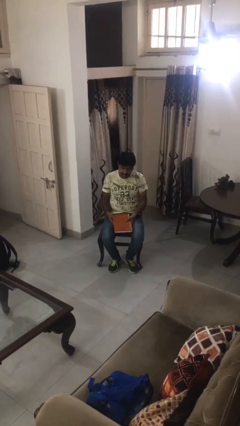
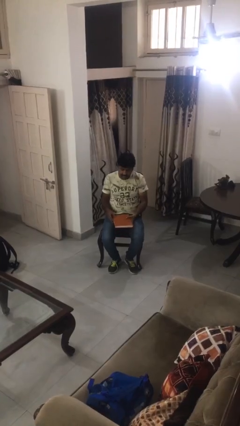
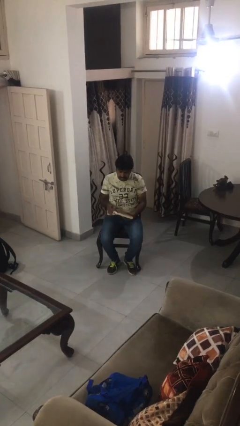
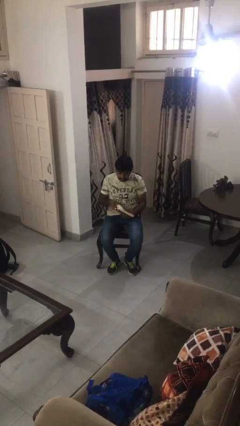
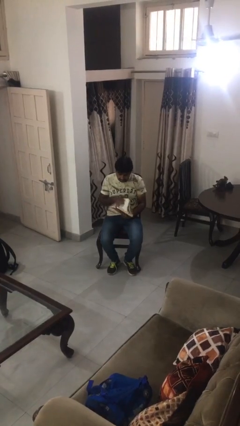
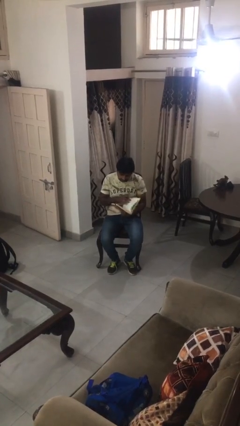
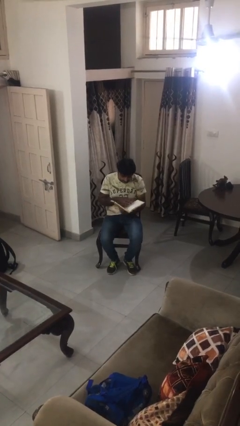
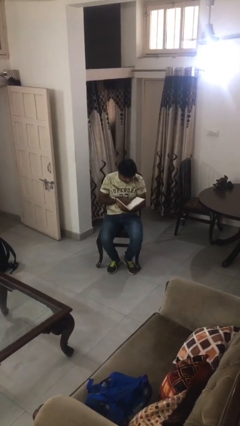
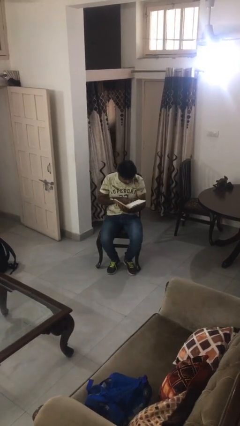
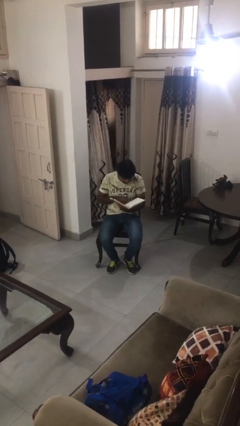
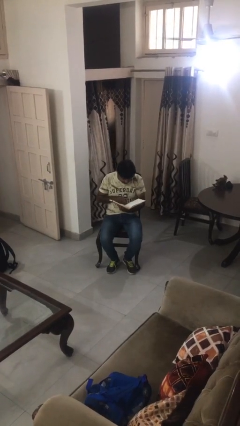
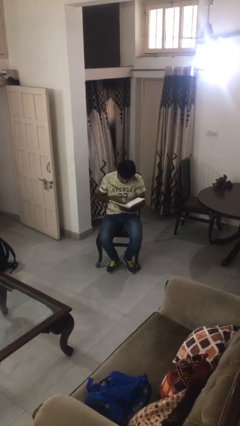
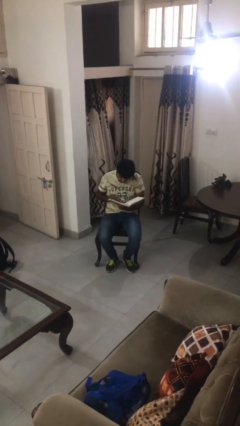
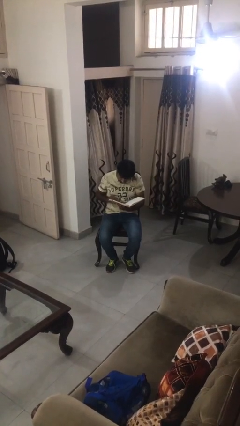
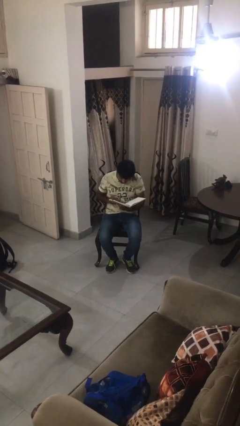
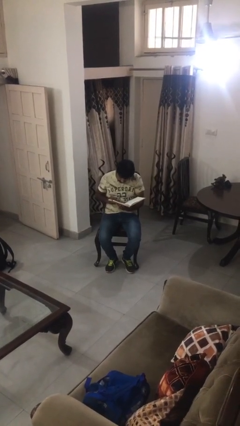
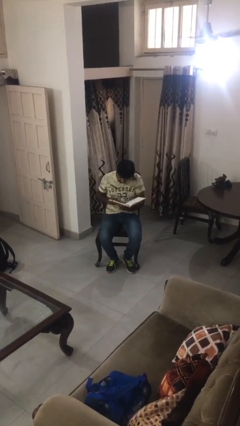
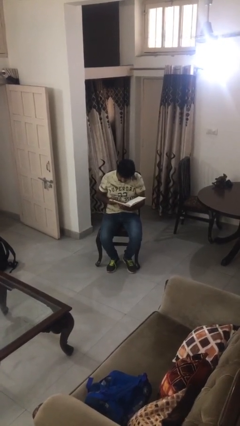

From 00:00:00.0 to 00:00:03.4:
person reads book

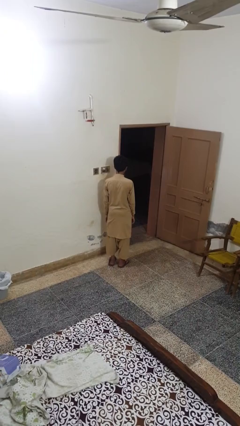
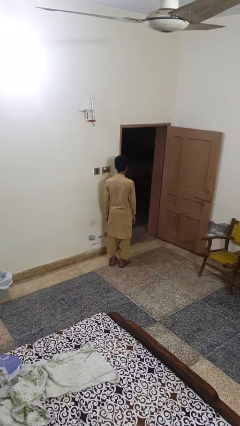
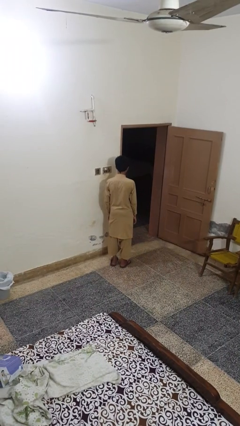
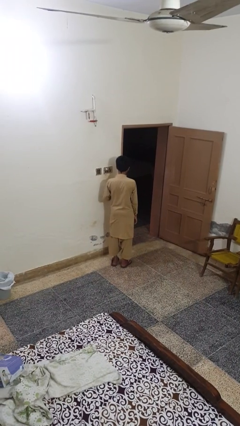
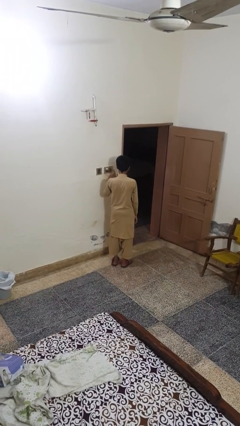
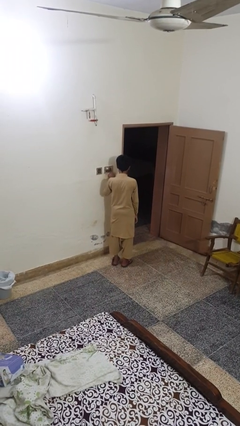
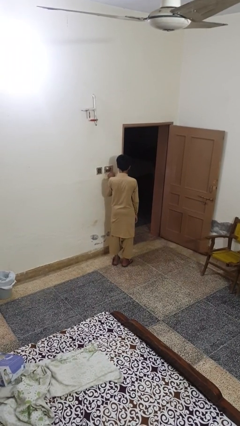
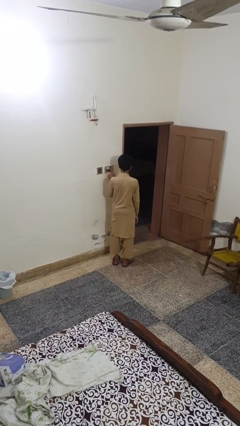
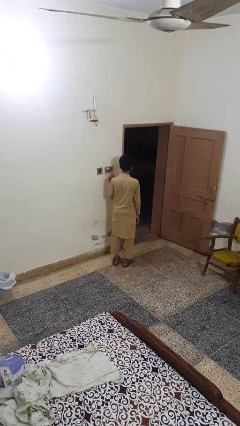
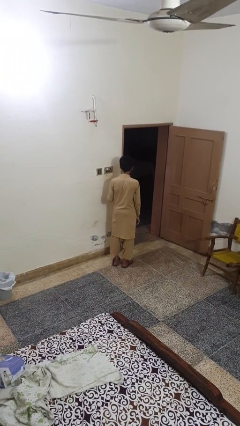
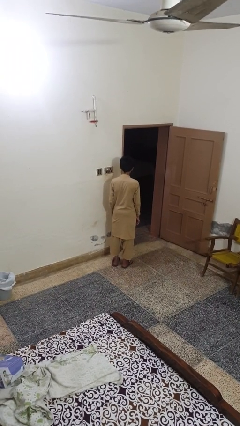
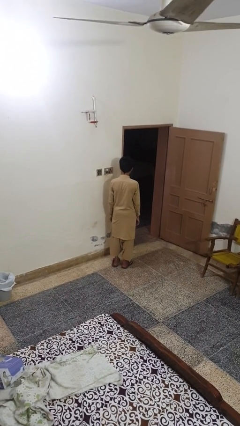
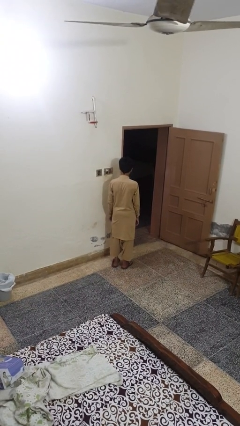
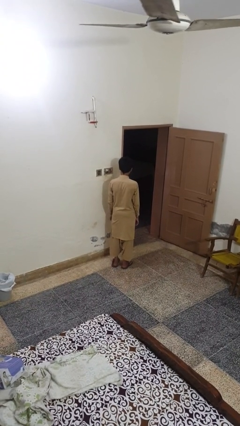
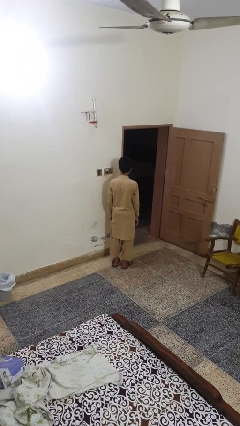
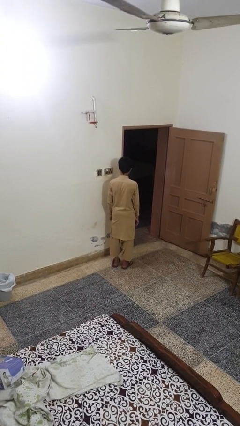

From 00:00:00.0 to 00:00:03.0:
person turns on fan

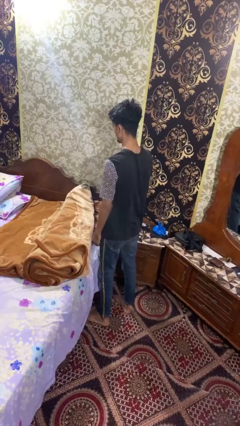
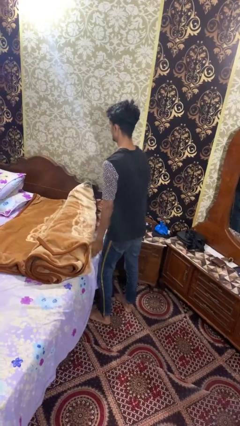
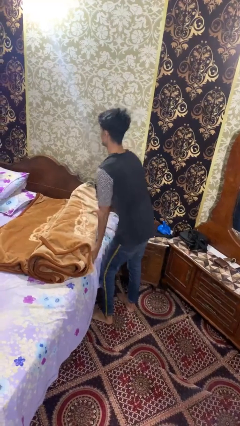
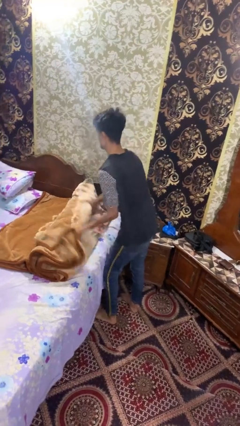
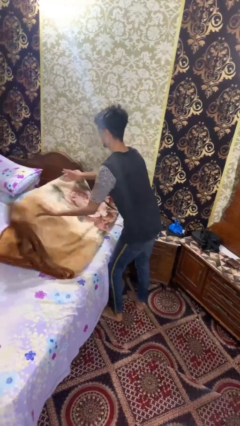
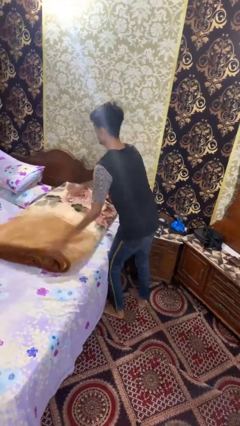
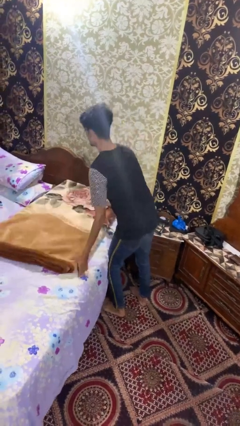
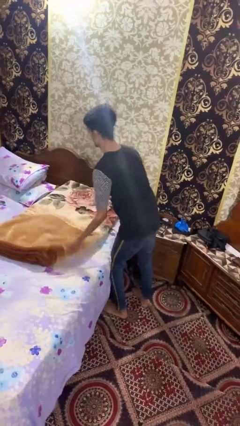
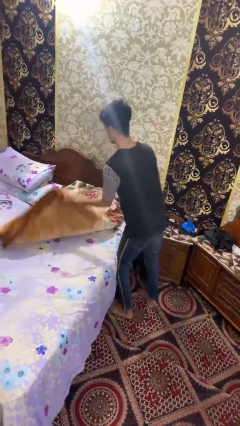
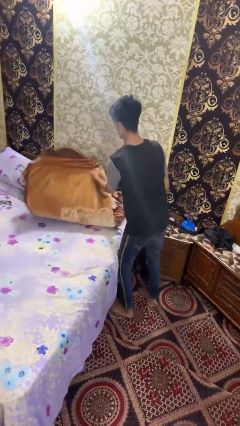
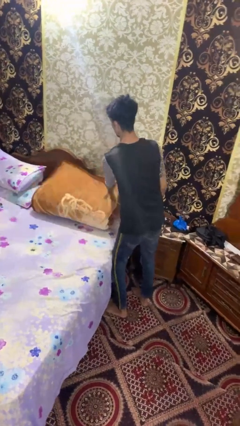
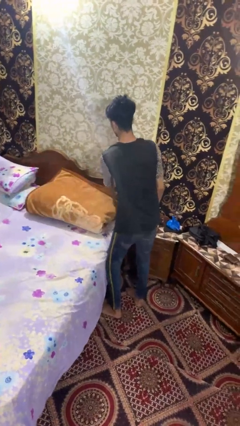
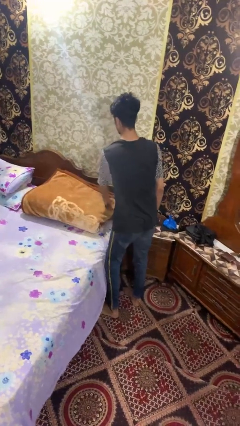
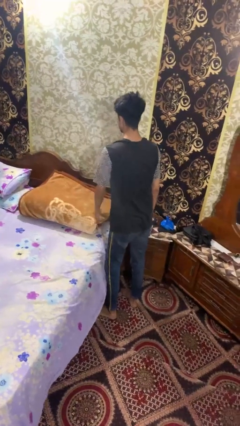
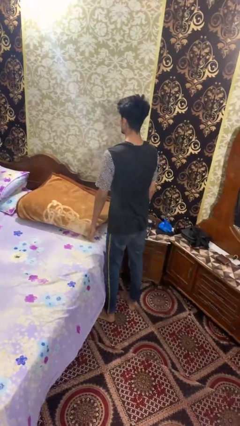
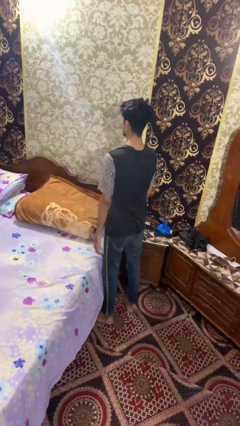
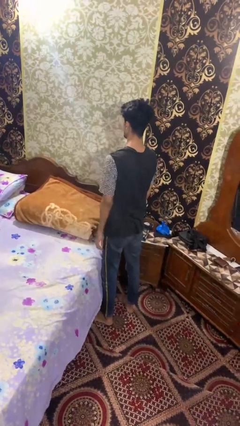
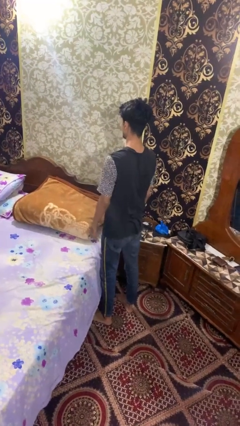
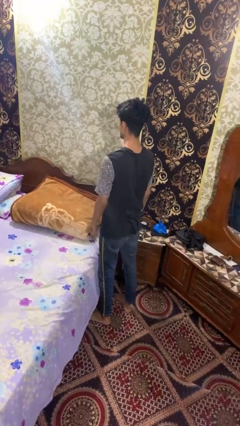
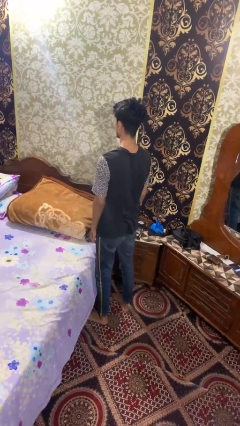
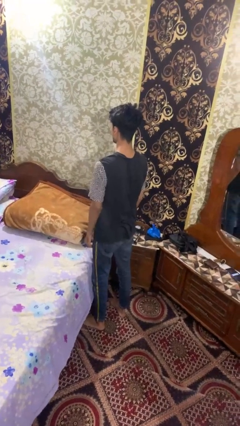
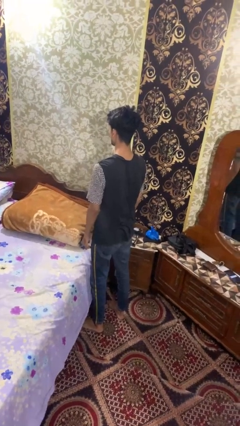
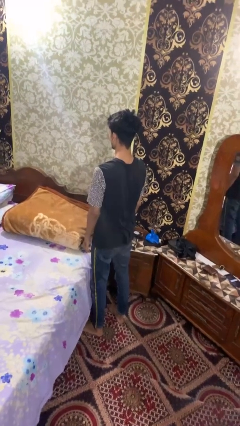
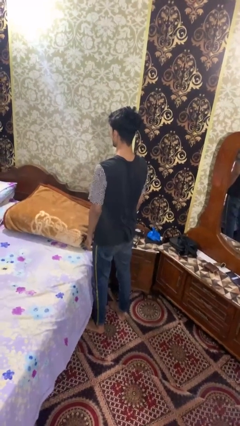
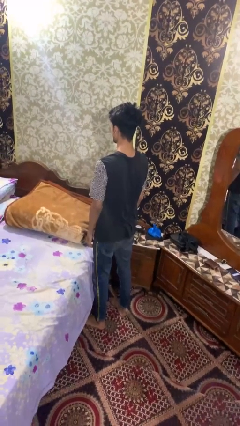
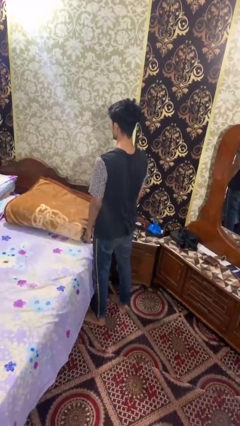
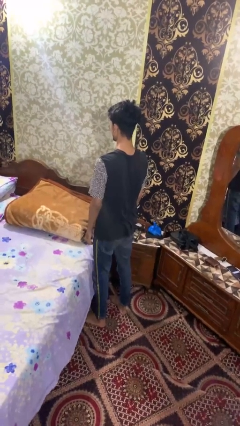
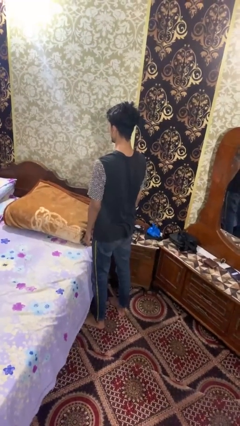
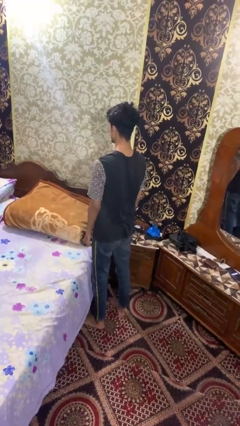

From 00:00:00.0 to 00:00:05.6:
person folds blanket

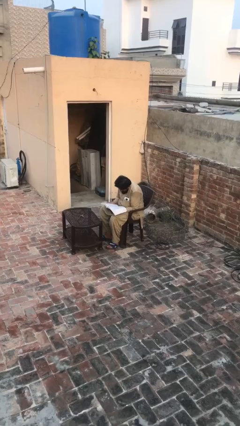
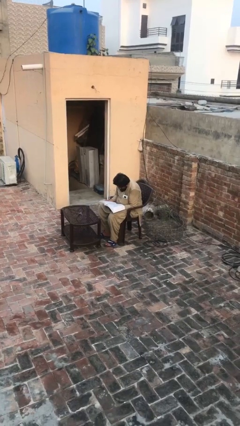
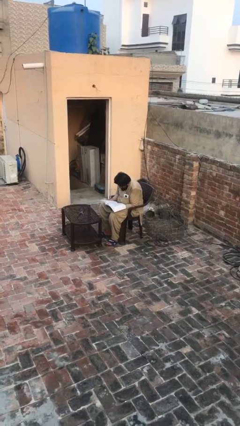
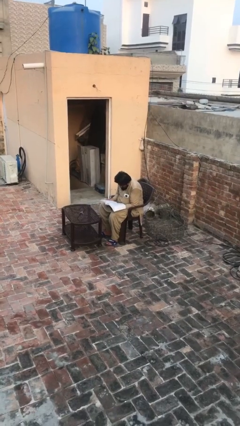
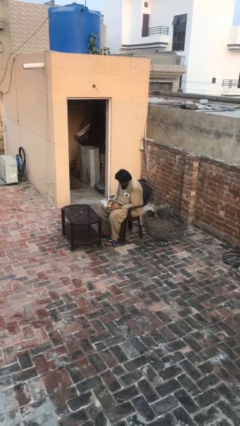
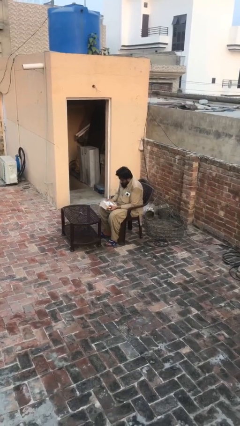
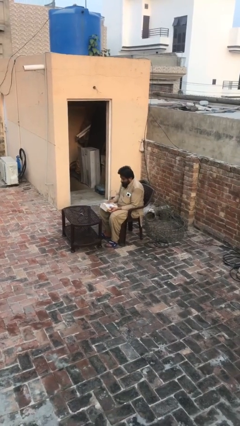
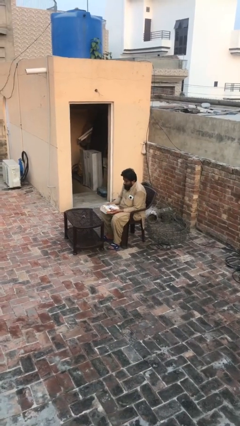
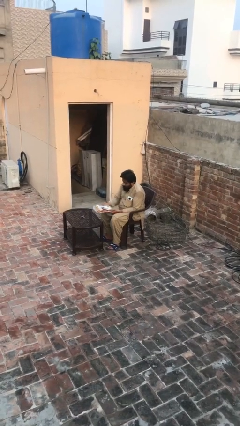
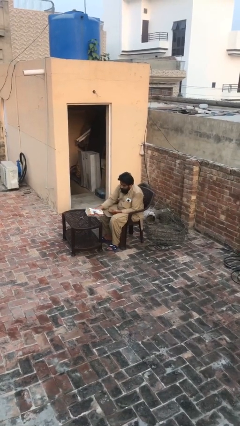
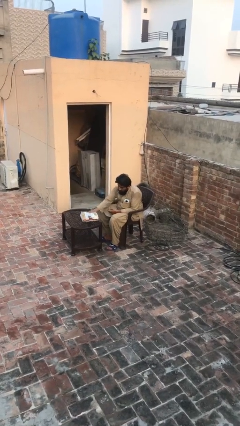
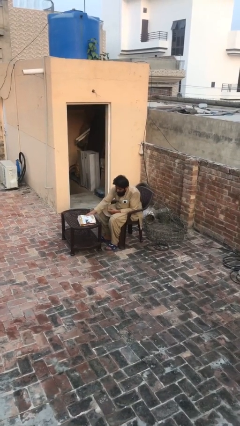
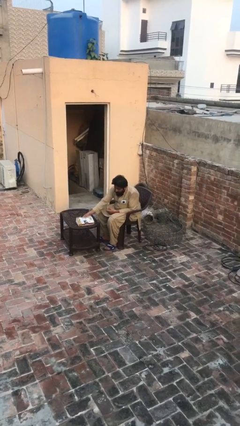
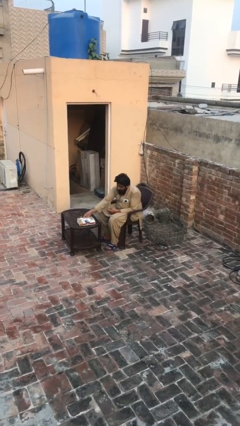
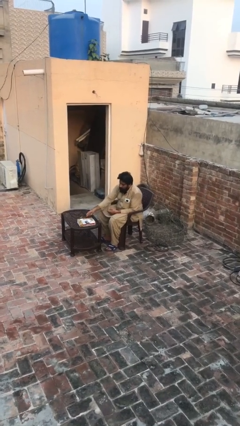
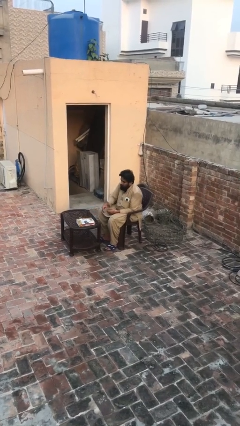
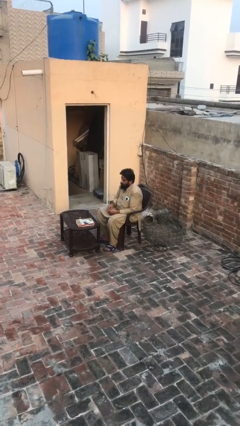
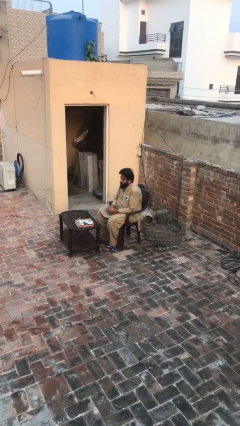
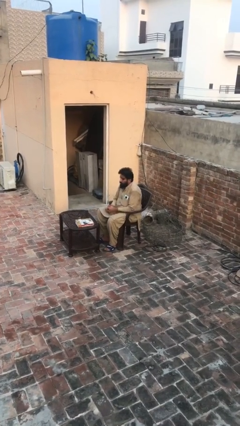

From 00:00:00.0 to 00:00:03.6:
person puts down object on table

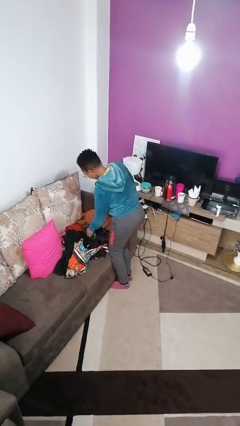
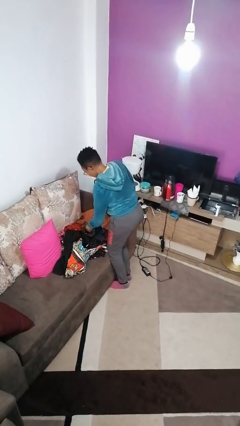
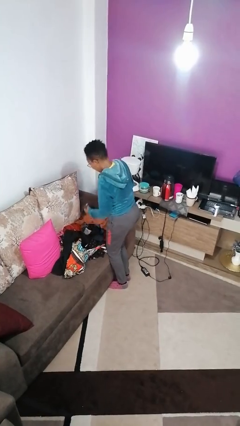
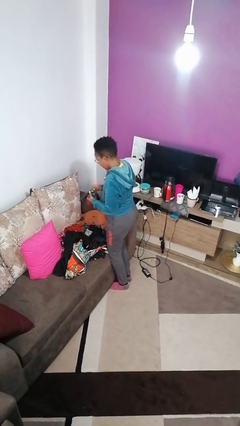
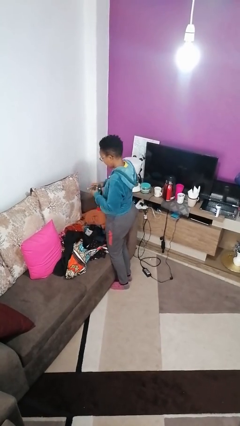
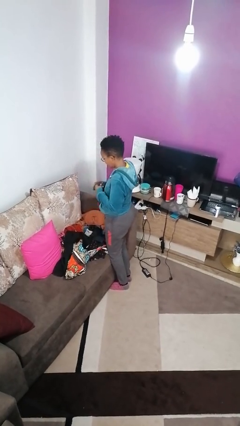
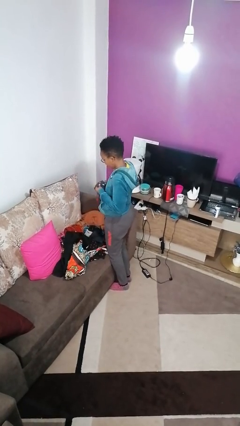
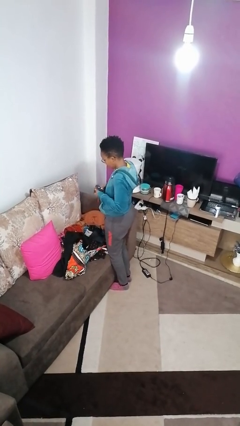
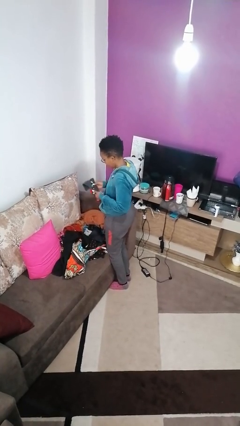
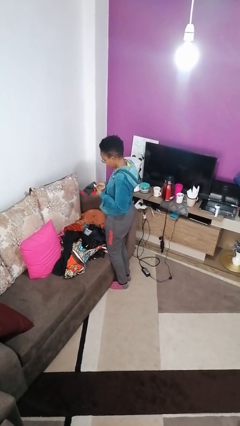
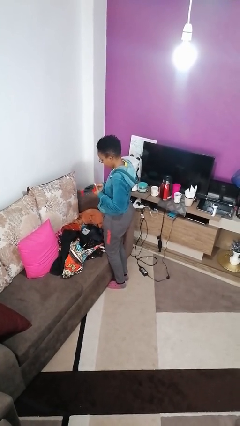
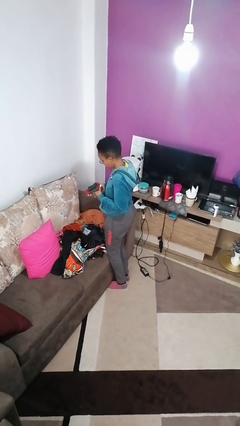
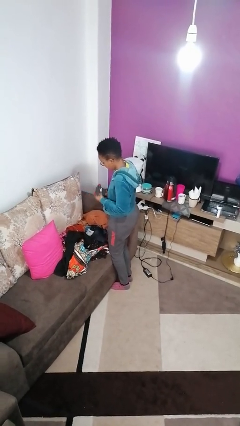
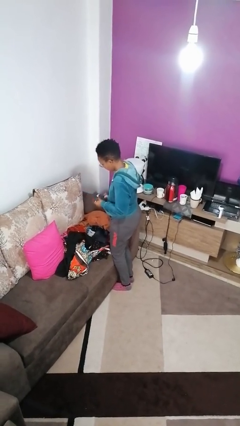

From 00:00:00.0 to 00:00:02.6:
person folds socks
